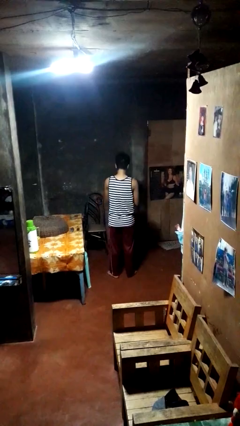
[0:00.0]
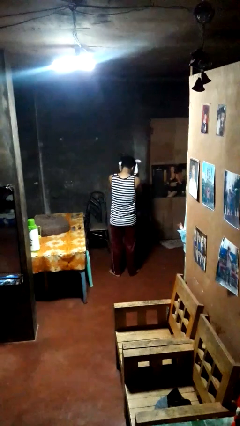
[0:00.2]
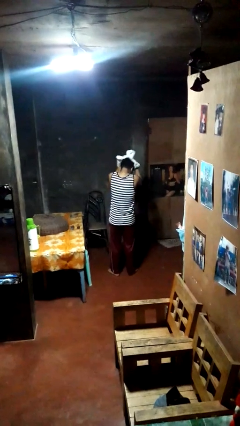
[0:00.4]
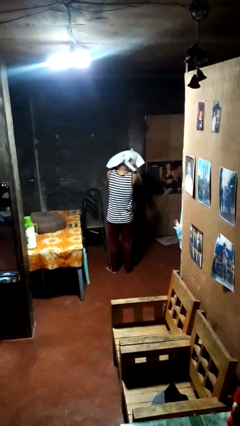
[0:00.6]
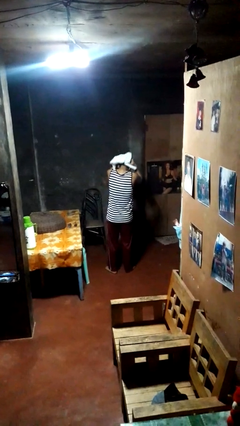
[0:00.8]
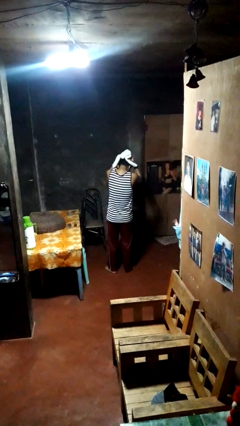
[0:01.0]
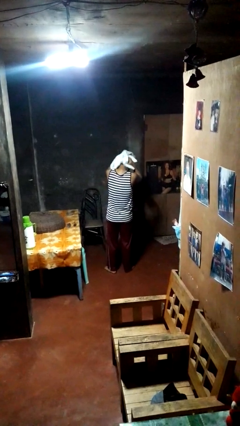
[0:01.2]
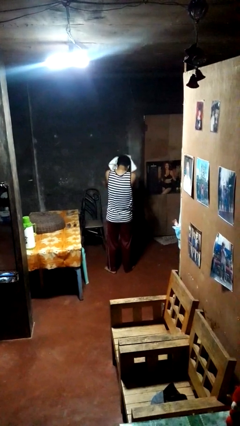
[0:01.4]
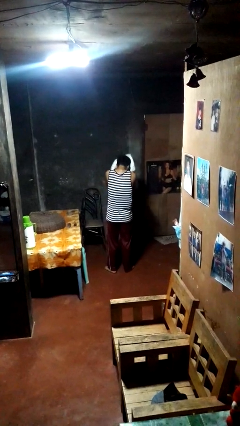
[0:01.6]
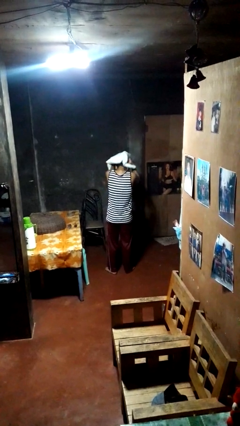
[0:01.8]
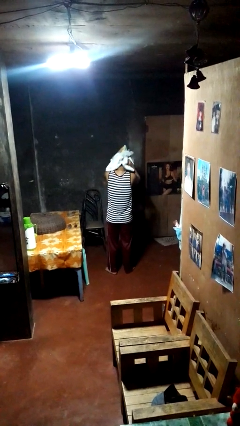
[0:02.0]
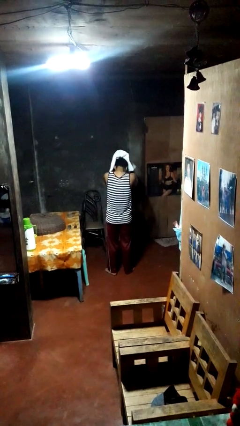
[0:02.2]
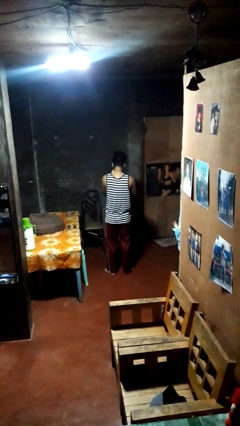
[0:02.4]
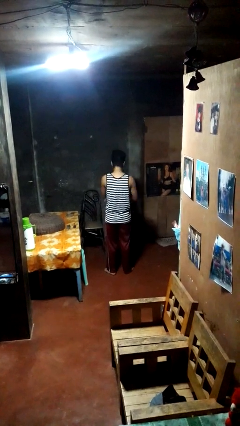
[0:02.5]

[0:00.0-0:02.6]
person dries hair with towel

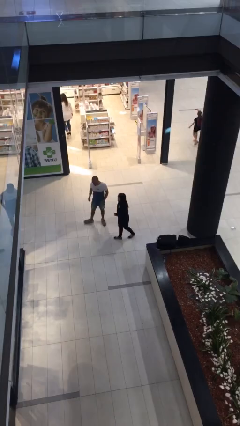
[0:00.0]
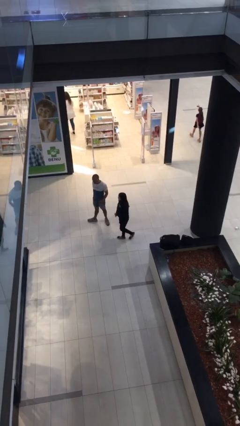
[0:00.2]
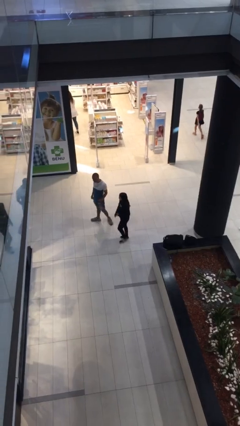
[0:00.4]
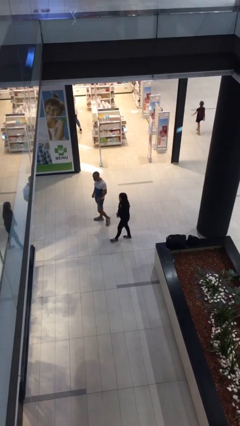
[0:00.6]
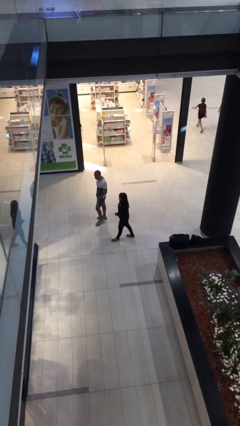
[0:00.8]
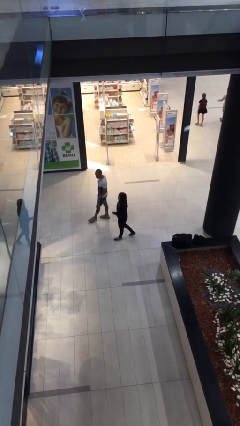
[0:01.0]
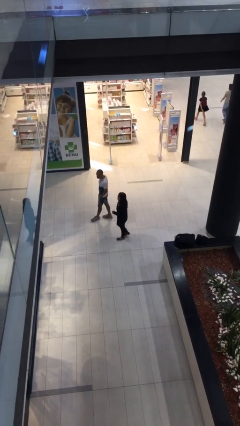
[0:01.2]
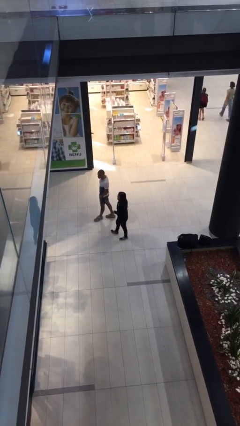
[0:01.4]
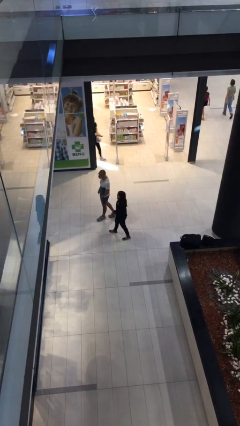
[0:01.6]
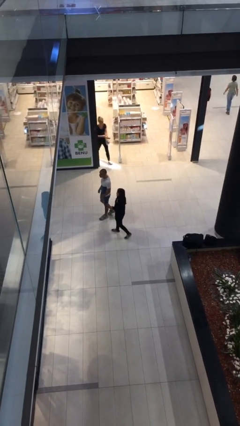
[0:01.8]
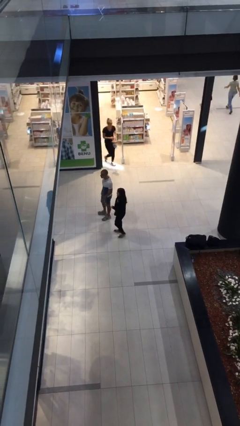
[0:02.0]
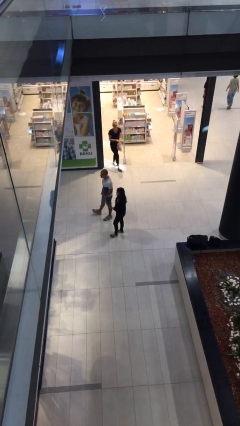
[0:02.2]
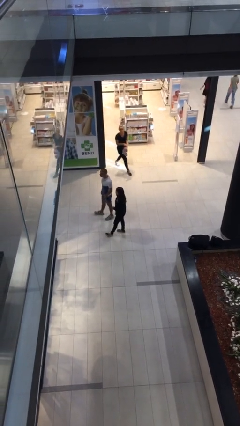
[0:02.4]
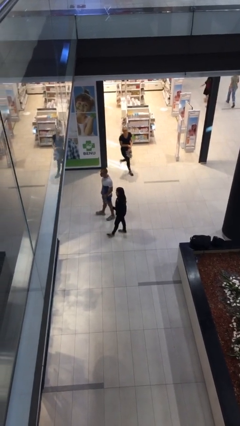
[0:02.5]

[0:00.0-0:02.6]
person talks to person

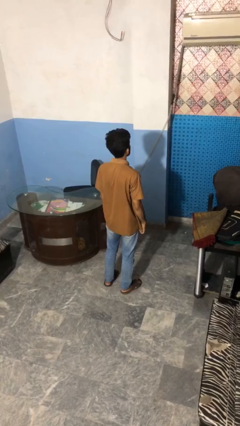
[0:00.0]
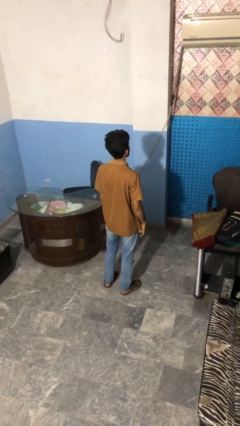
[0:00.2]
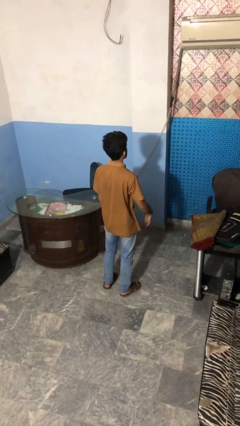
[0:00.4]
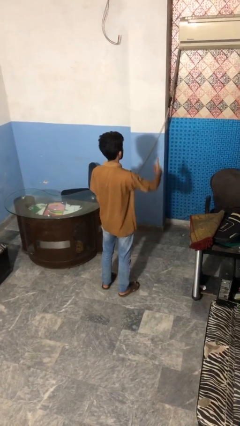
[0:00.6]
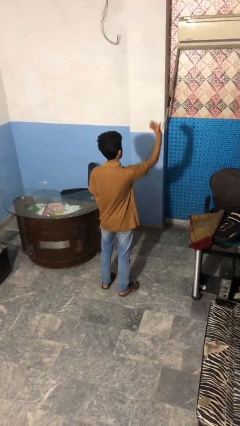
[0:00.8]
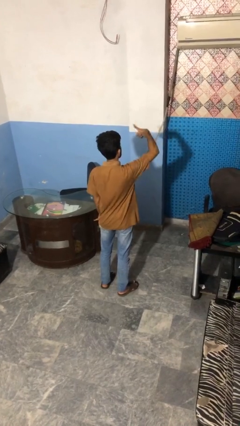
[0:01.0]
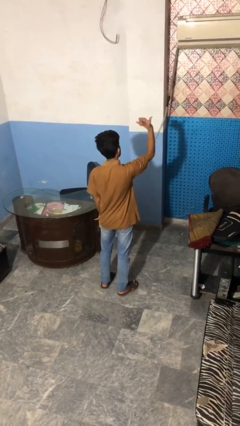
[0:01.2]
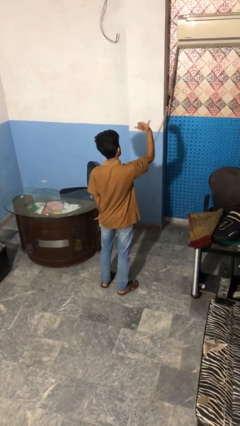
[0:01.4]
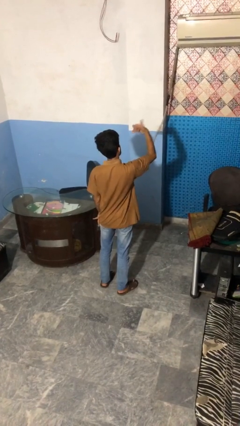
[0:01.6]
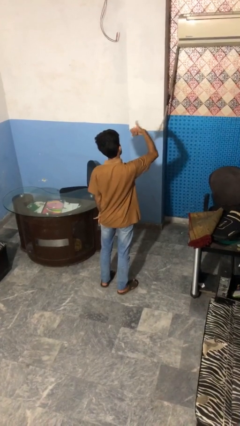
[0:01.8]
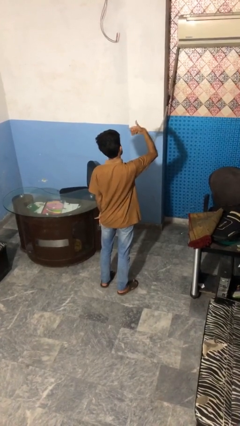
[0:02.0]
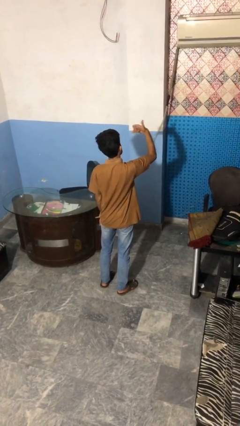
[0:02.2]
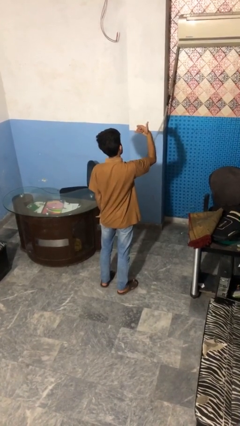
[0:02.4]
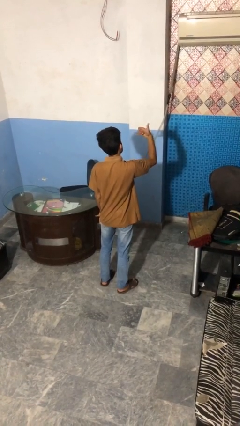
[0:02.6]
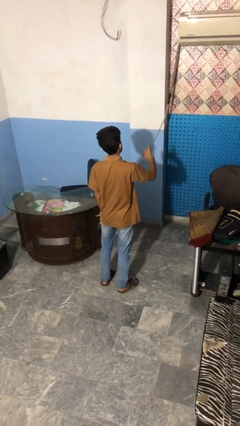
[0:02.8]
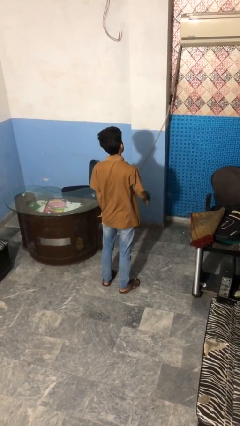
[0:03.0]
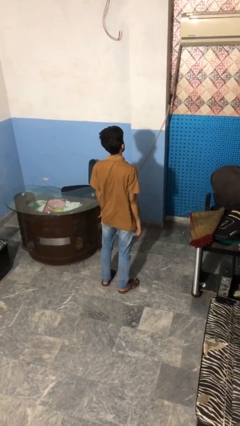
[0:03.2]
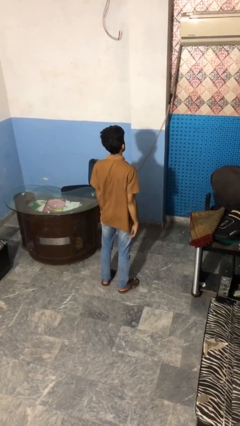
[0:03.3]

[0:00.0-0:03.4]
person gestures hang loose

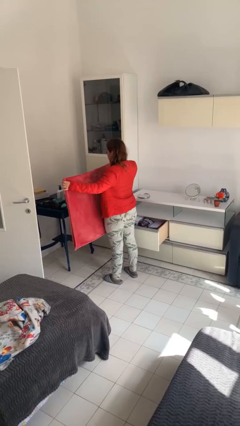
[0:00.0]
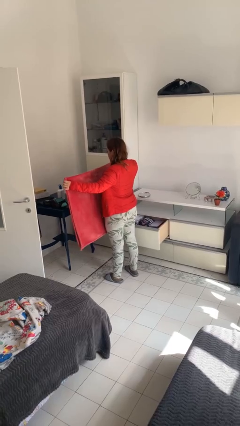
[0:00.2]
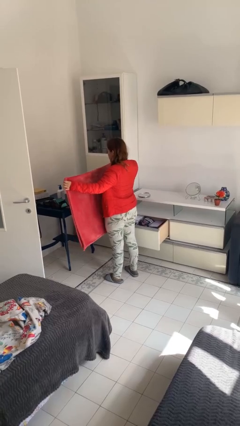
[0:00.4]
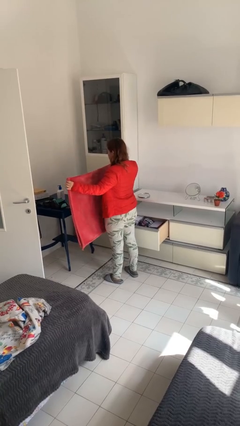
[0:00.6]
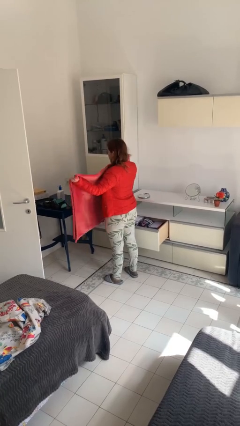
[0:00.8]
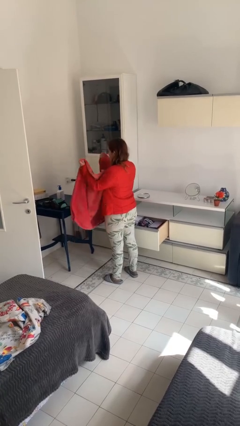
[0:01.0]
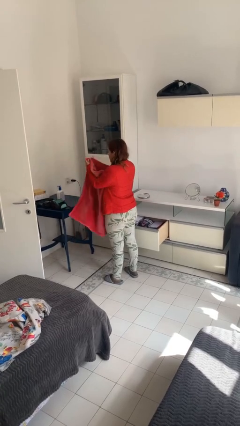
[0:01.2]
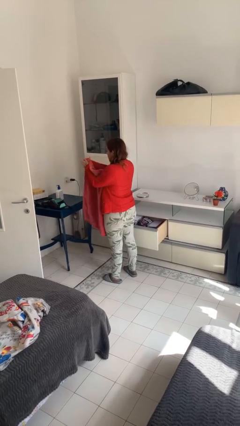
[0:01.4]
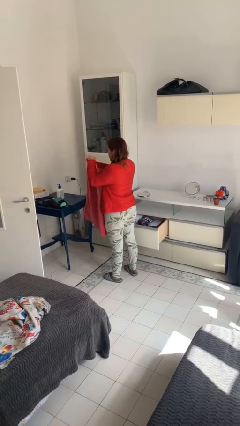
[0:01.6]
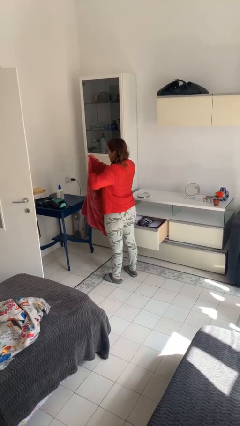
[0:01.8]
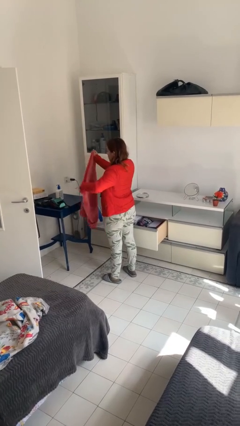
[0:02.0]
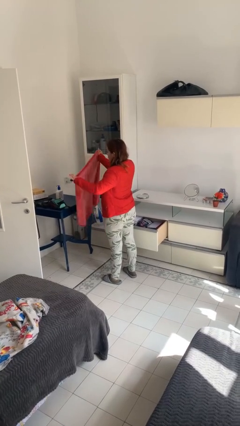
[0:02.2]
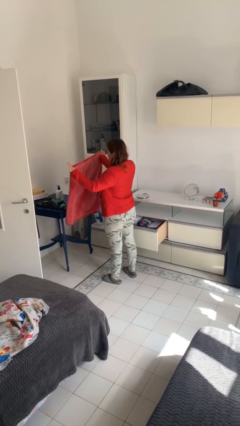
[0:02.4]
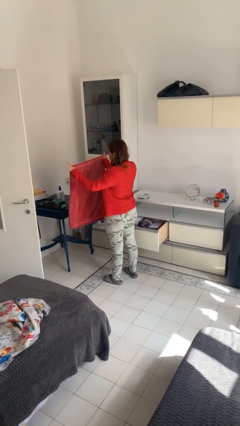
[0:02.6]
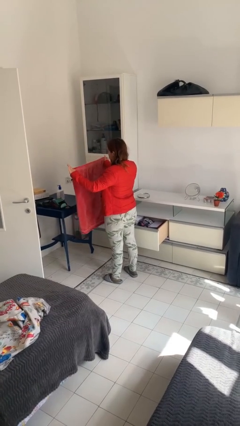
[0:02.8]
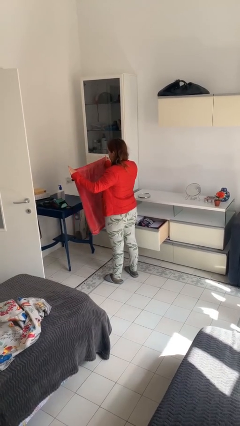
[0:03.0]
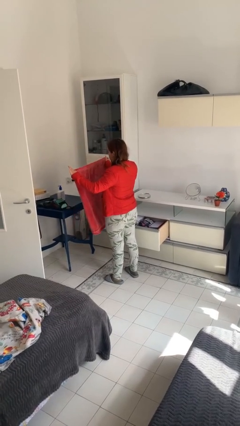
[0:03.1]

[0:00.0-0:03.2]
person folds blanket

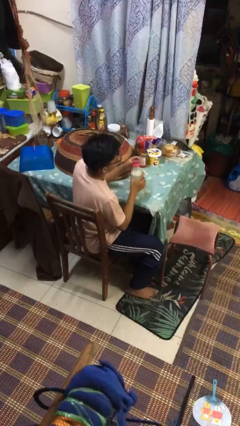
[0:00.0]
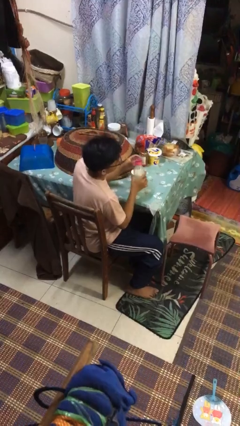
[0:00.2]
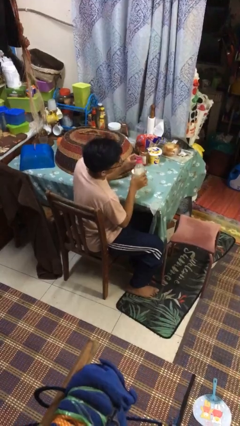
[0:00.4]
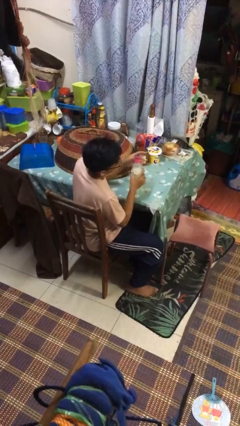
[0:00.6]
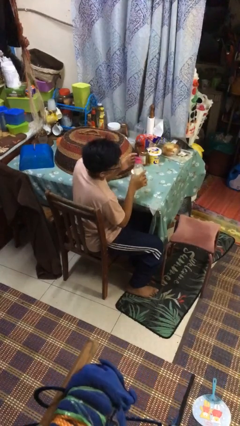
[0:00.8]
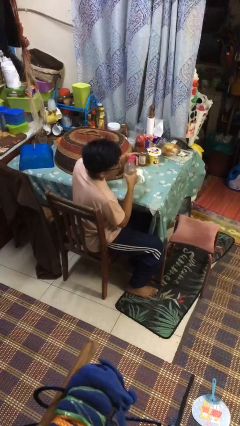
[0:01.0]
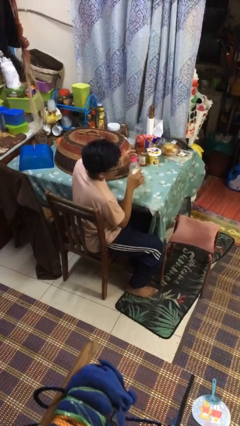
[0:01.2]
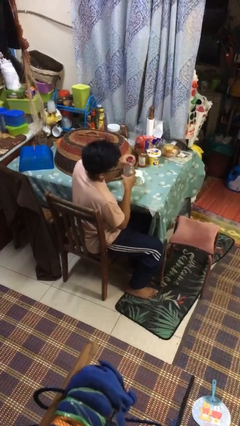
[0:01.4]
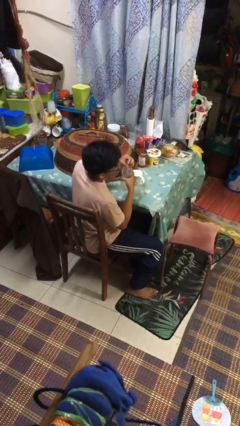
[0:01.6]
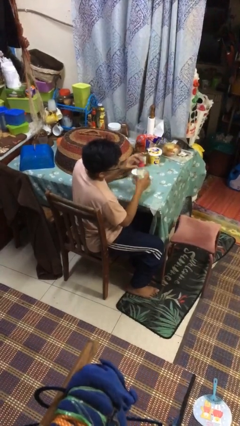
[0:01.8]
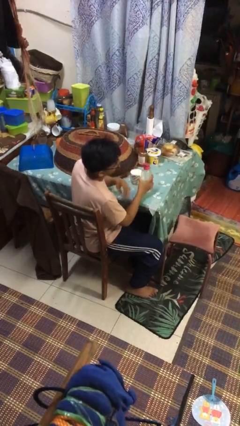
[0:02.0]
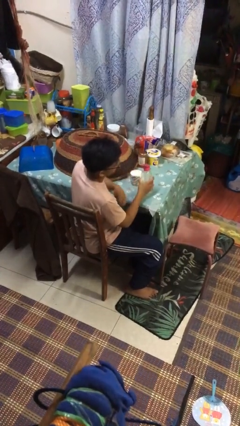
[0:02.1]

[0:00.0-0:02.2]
person screws lid to bottle

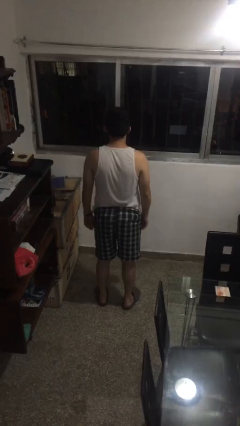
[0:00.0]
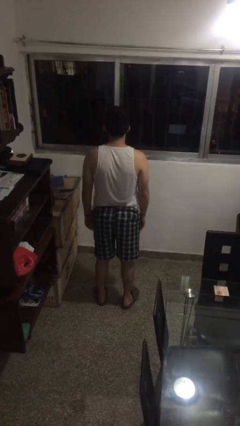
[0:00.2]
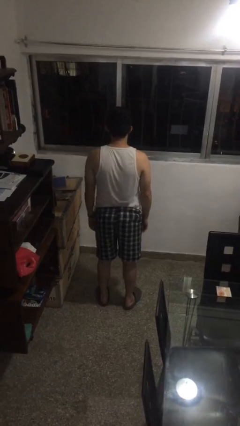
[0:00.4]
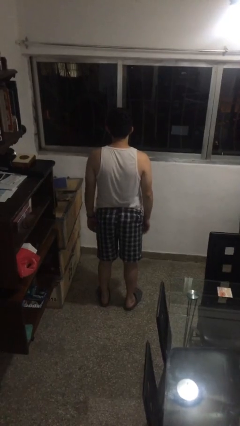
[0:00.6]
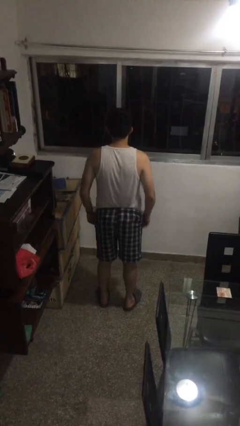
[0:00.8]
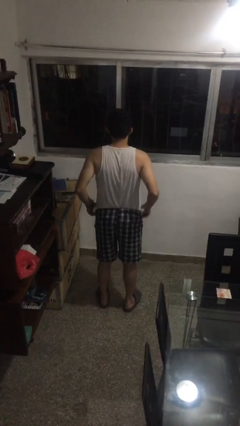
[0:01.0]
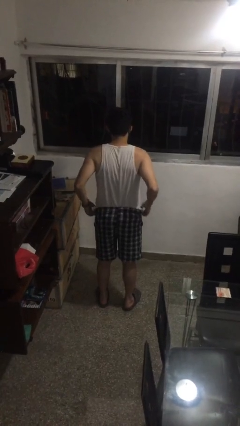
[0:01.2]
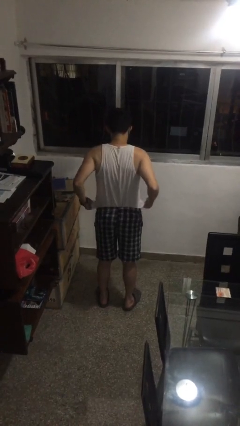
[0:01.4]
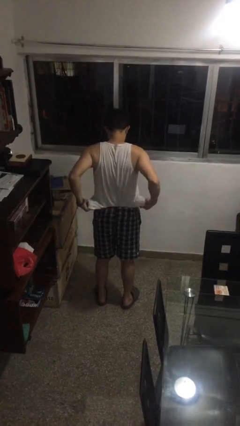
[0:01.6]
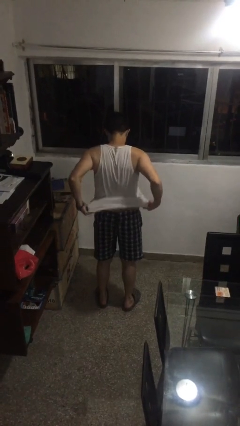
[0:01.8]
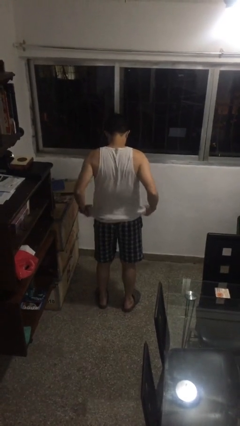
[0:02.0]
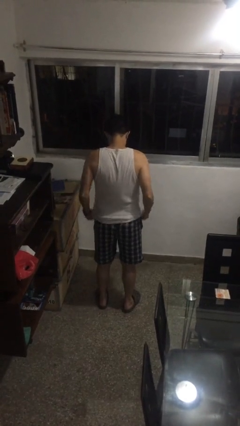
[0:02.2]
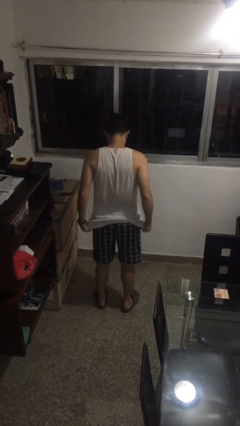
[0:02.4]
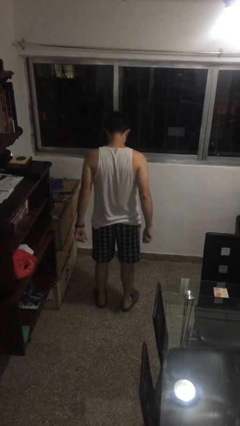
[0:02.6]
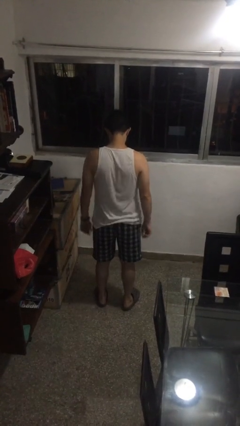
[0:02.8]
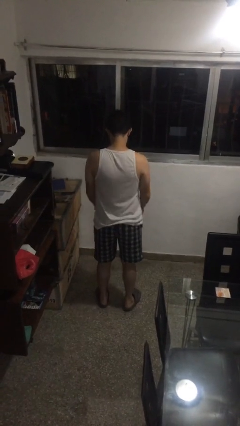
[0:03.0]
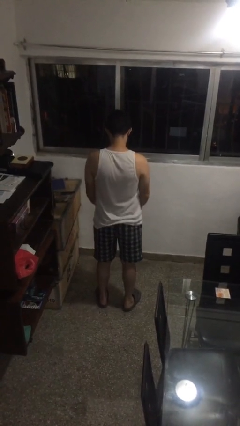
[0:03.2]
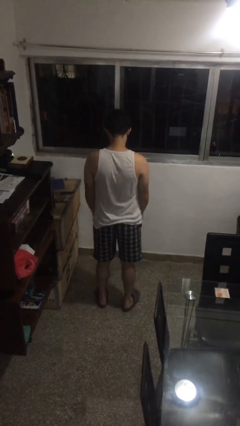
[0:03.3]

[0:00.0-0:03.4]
person untucks shirt

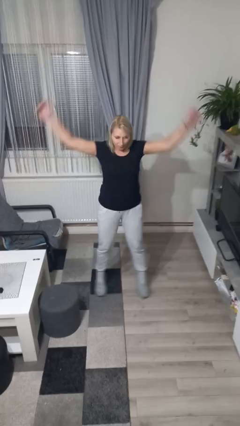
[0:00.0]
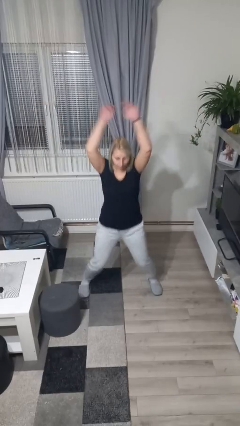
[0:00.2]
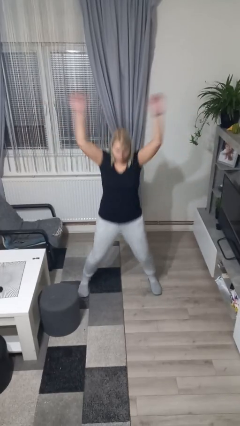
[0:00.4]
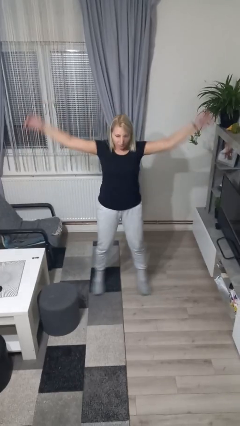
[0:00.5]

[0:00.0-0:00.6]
person exercises with jumping jacks
